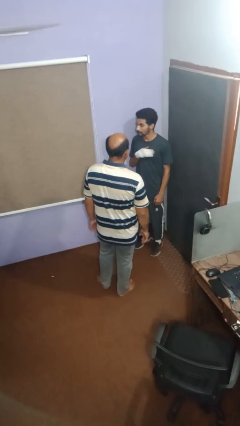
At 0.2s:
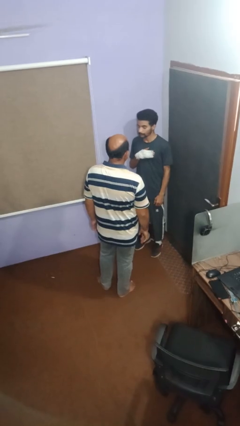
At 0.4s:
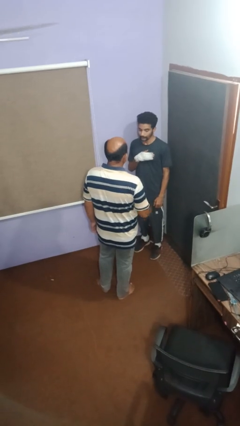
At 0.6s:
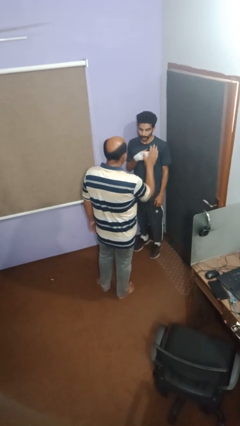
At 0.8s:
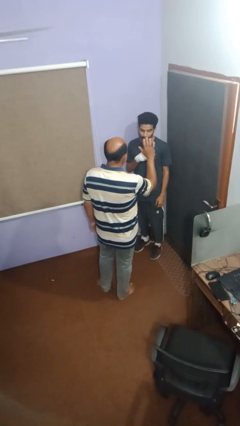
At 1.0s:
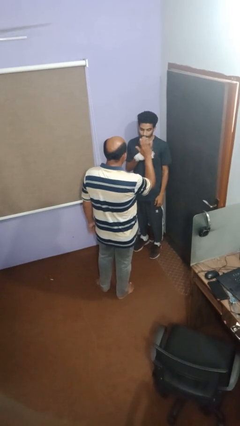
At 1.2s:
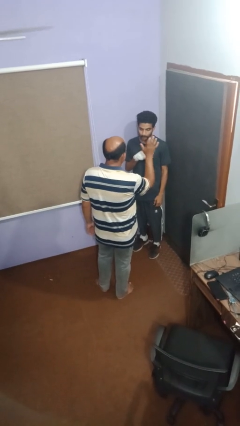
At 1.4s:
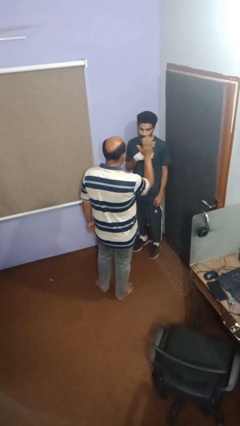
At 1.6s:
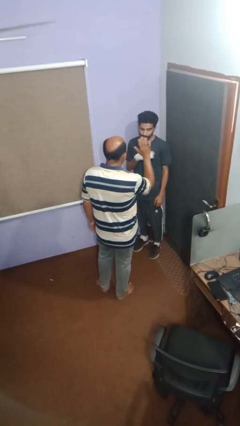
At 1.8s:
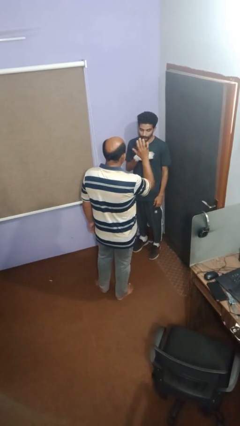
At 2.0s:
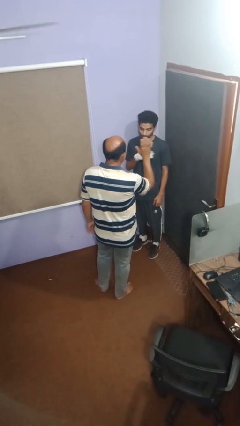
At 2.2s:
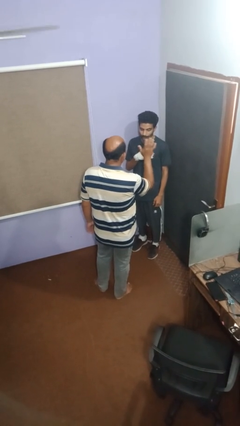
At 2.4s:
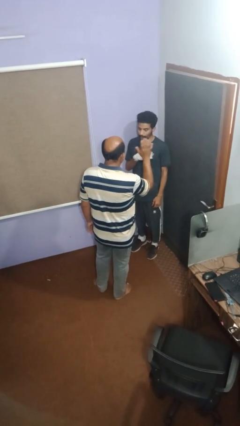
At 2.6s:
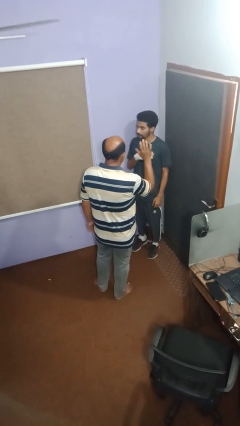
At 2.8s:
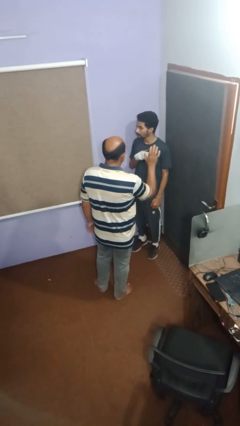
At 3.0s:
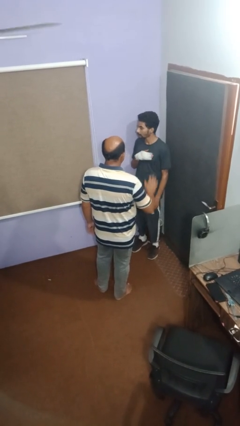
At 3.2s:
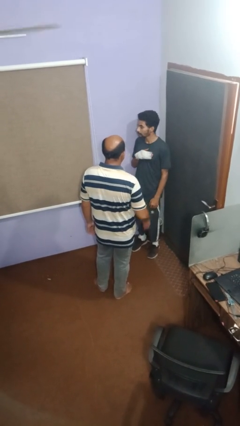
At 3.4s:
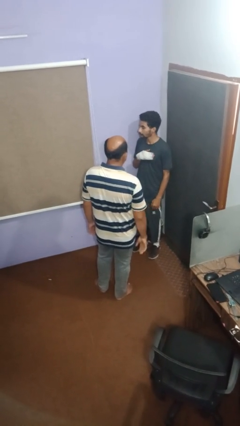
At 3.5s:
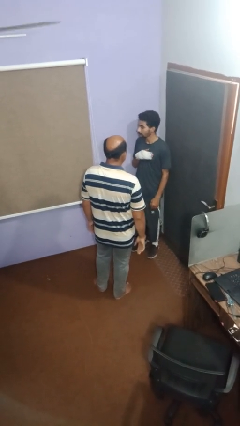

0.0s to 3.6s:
person waves at person

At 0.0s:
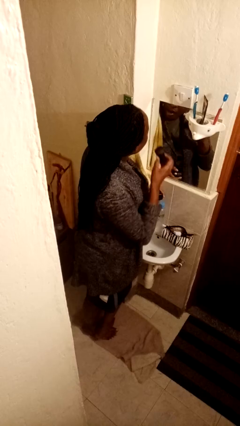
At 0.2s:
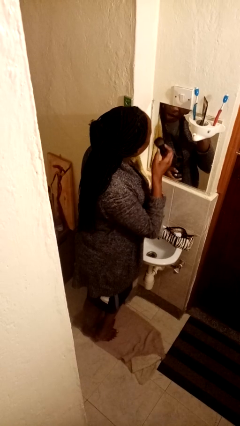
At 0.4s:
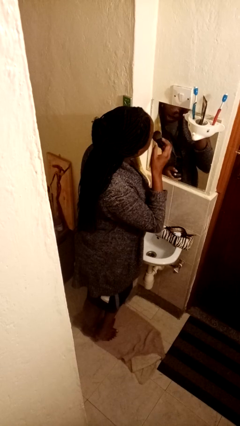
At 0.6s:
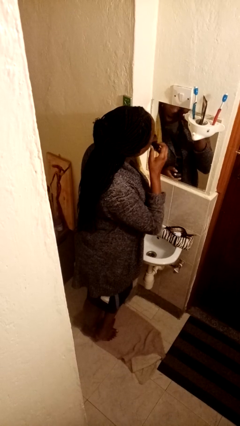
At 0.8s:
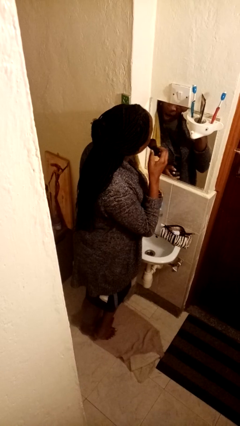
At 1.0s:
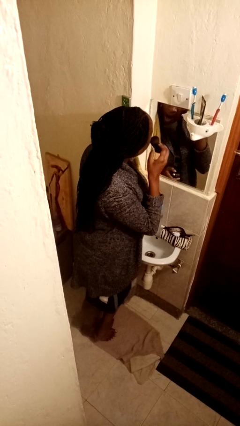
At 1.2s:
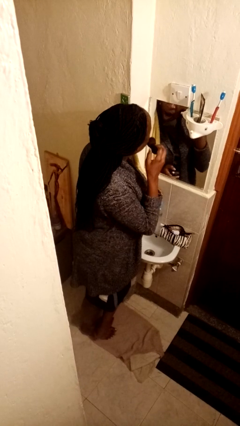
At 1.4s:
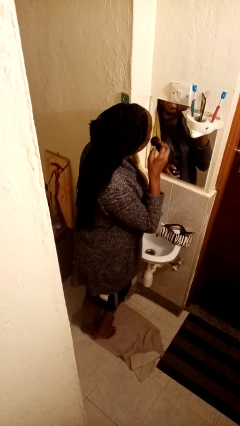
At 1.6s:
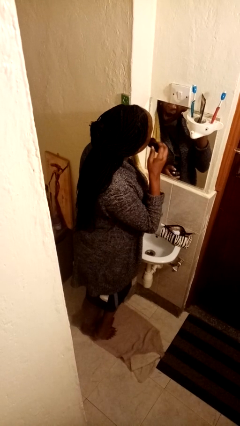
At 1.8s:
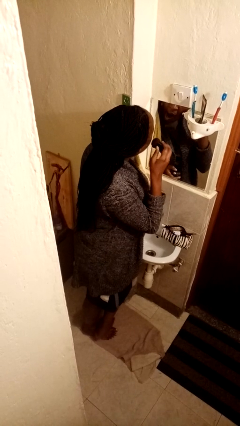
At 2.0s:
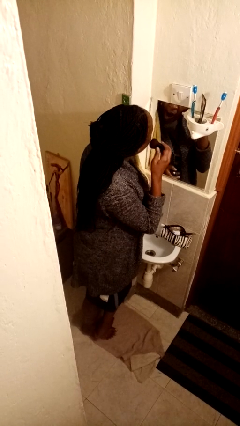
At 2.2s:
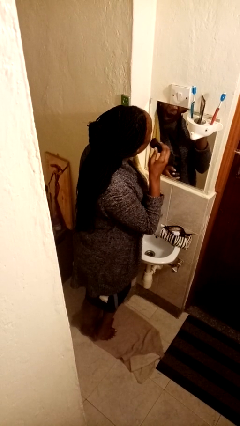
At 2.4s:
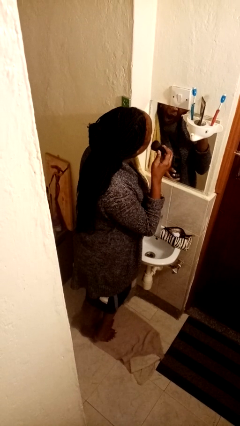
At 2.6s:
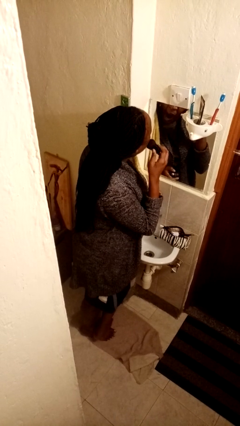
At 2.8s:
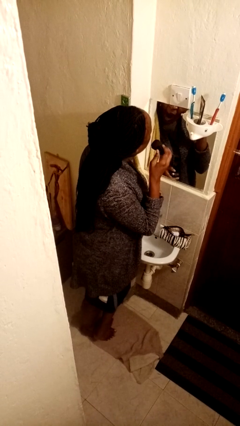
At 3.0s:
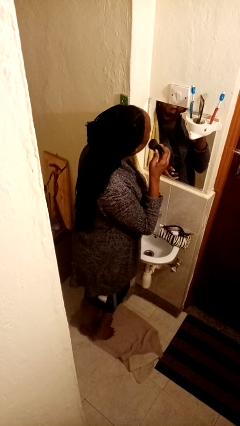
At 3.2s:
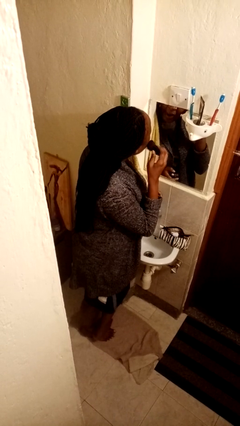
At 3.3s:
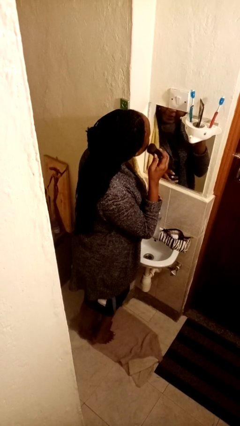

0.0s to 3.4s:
person applies foundation makeup

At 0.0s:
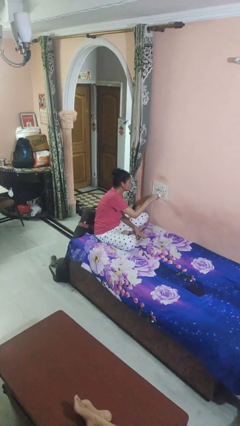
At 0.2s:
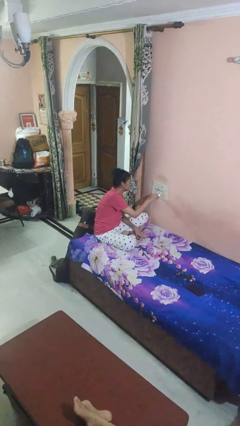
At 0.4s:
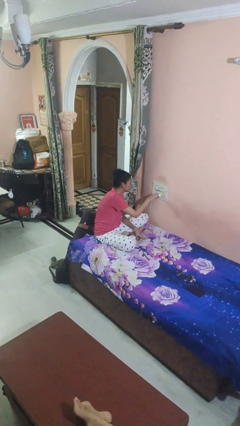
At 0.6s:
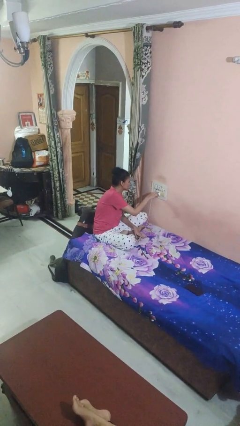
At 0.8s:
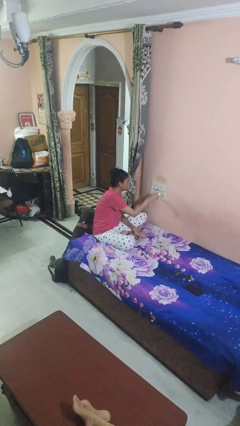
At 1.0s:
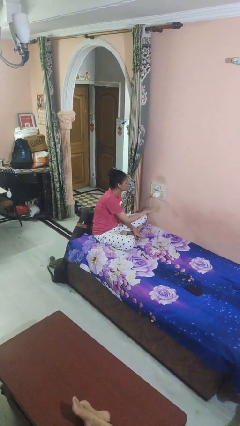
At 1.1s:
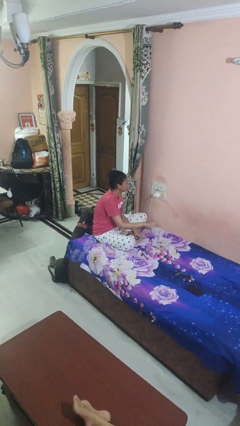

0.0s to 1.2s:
person plugs into electrical socket

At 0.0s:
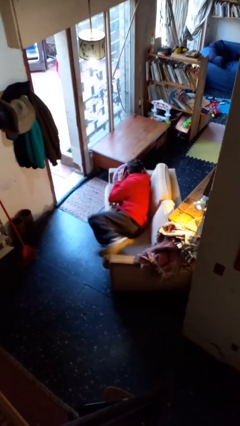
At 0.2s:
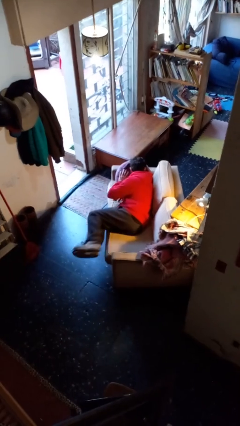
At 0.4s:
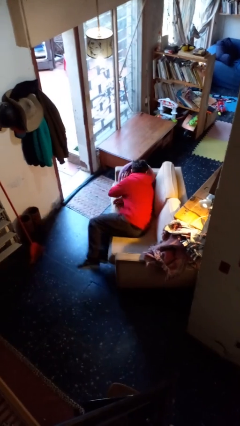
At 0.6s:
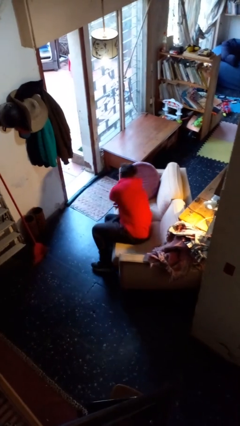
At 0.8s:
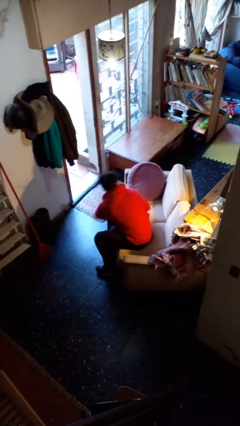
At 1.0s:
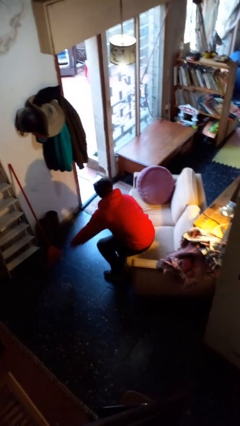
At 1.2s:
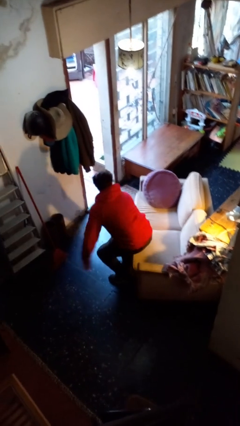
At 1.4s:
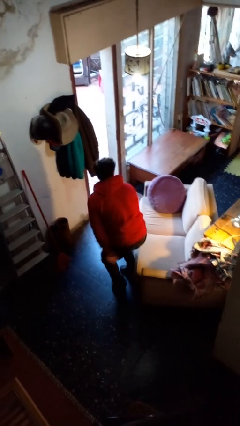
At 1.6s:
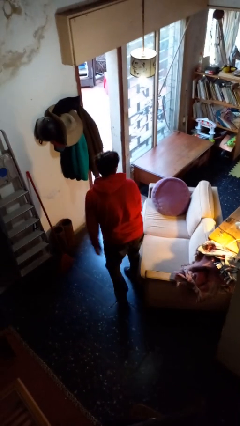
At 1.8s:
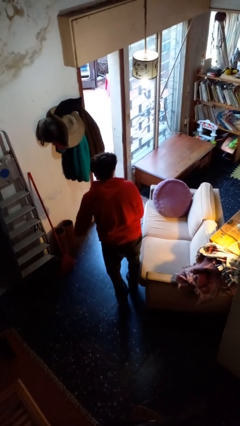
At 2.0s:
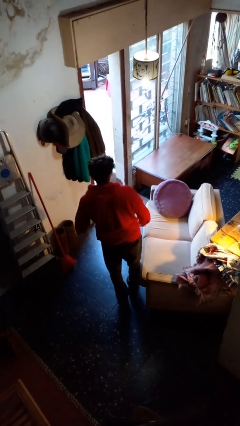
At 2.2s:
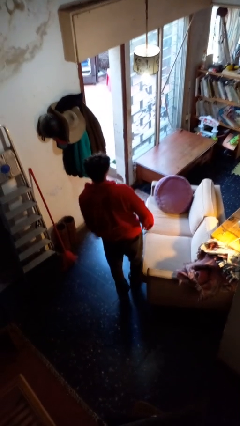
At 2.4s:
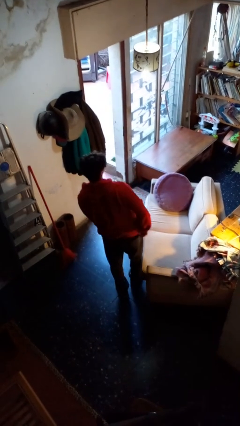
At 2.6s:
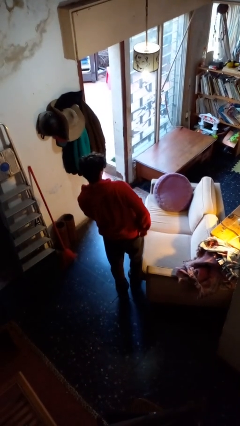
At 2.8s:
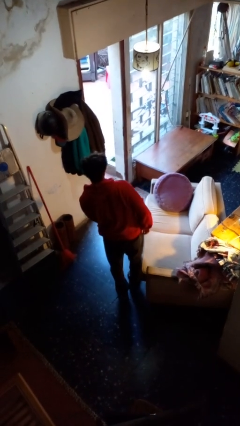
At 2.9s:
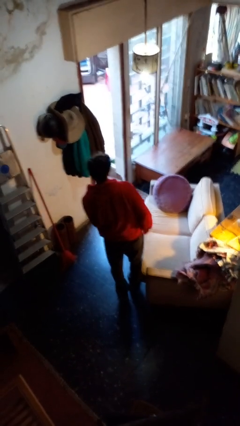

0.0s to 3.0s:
person stands up

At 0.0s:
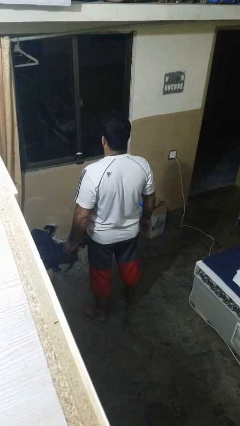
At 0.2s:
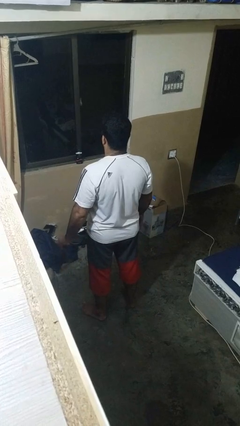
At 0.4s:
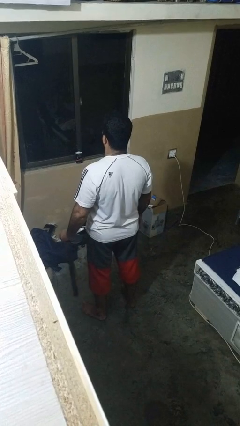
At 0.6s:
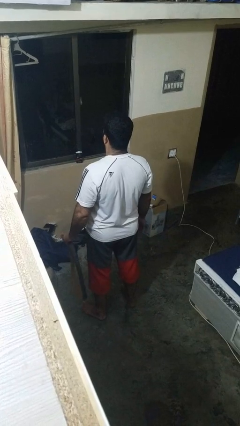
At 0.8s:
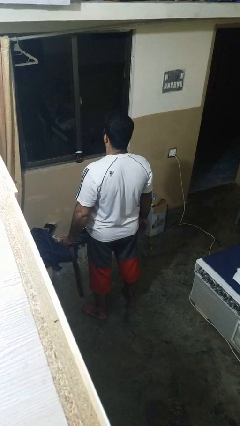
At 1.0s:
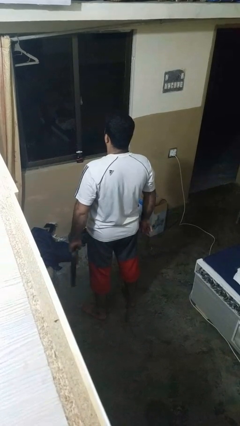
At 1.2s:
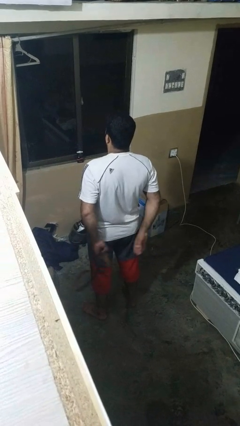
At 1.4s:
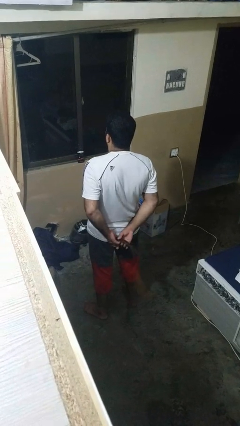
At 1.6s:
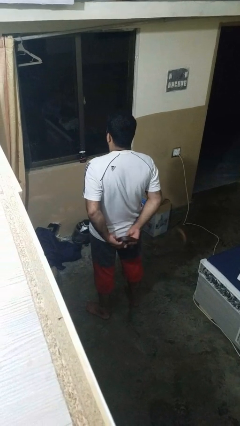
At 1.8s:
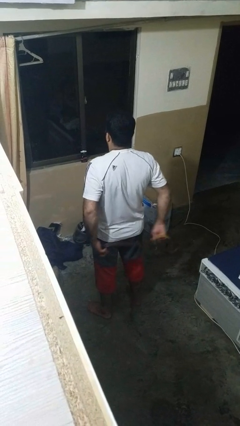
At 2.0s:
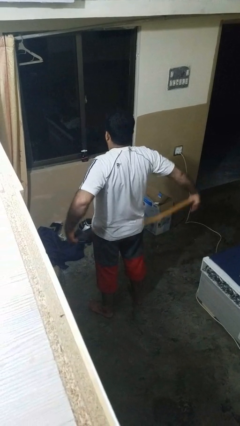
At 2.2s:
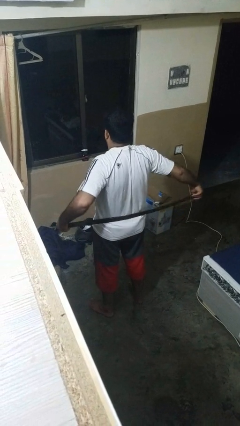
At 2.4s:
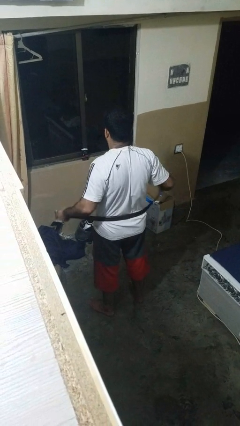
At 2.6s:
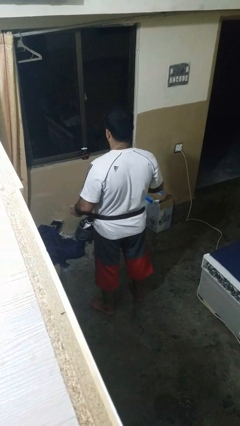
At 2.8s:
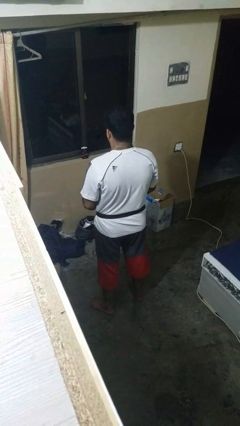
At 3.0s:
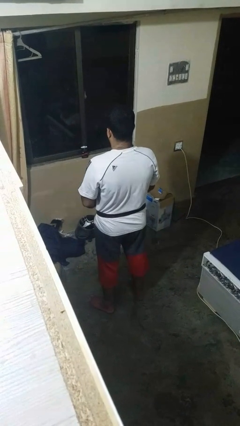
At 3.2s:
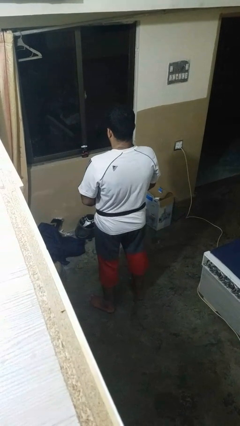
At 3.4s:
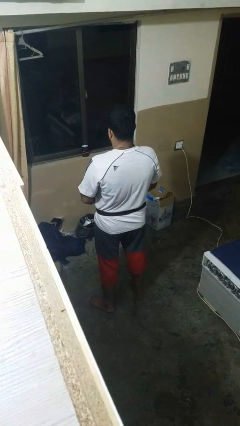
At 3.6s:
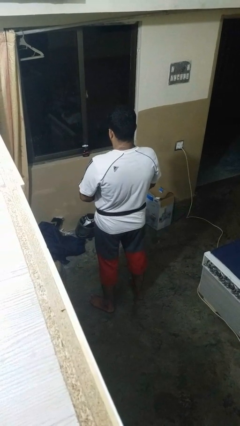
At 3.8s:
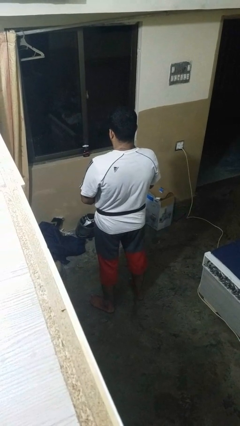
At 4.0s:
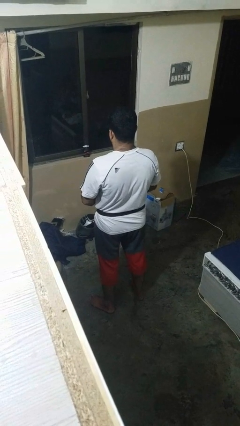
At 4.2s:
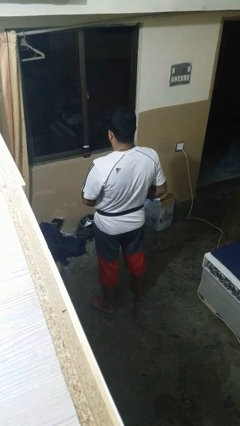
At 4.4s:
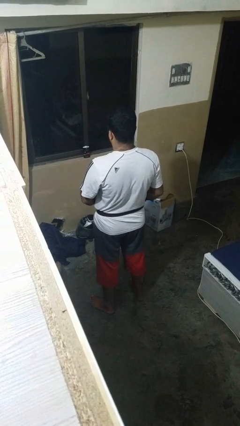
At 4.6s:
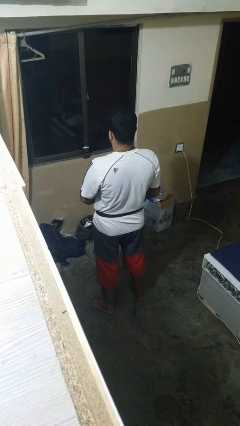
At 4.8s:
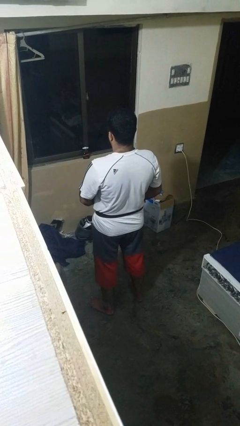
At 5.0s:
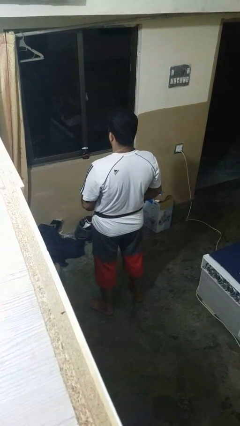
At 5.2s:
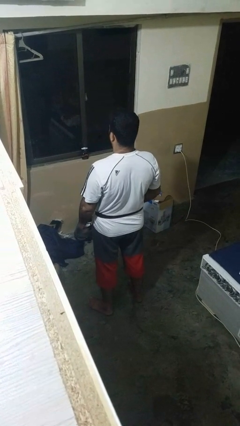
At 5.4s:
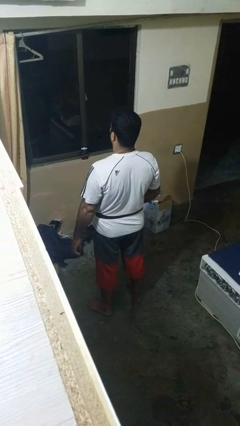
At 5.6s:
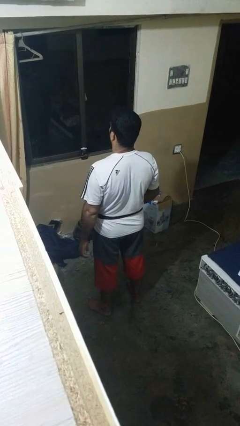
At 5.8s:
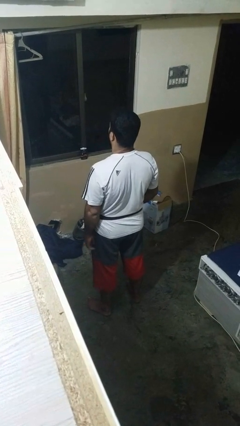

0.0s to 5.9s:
person puts on belt

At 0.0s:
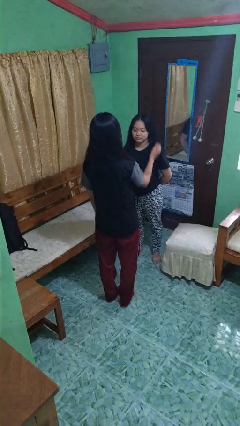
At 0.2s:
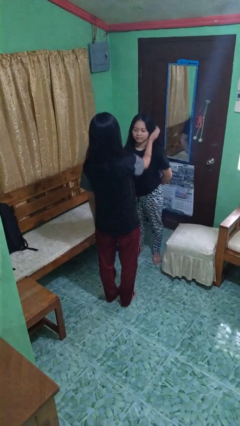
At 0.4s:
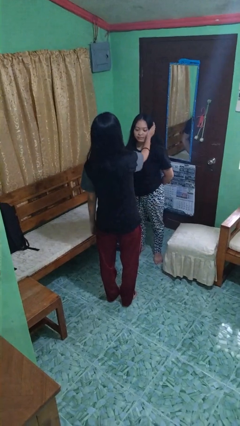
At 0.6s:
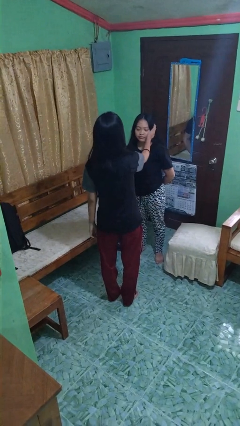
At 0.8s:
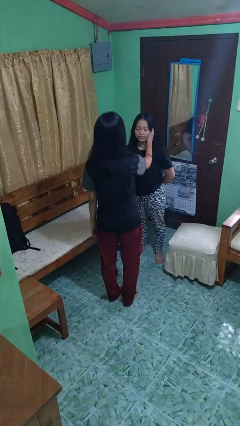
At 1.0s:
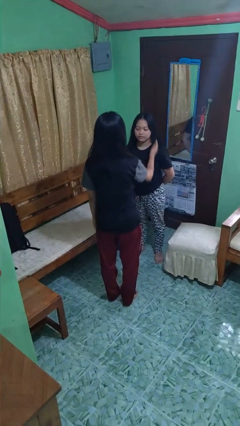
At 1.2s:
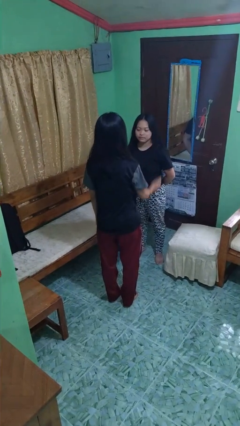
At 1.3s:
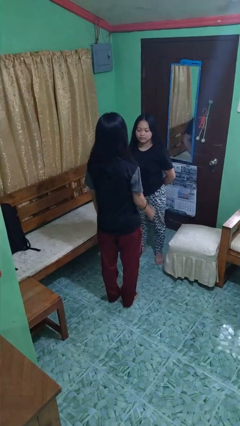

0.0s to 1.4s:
person touches face of person
